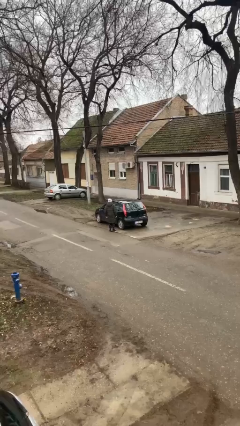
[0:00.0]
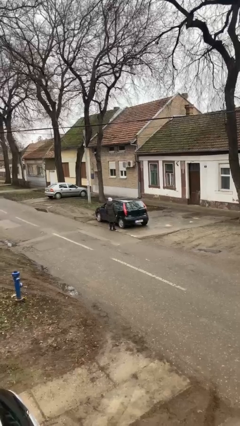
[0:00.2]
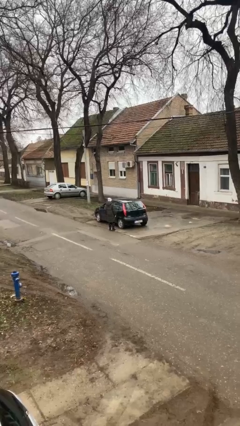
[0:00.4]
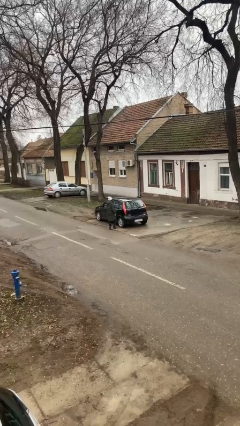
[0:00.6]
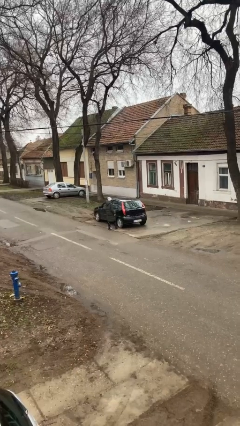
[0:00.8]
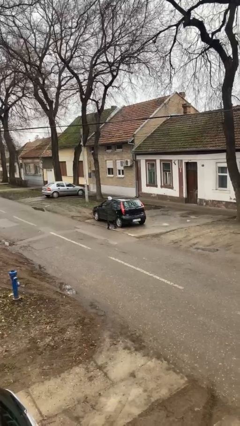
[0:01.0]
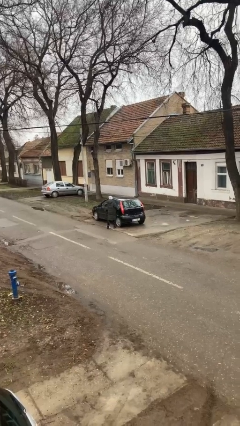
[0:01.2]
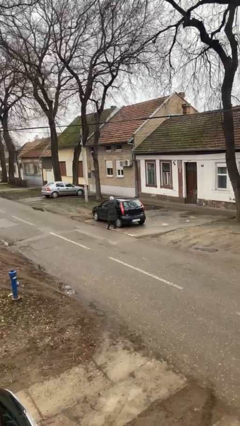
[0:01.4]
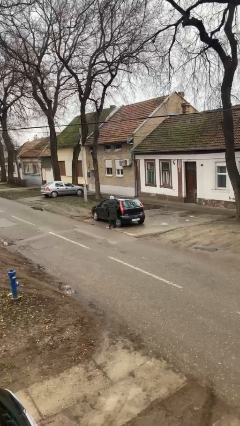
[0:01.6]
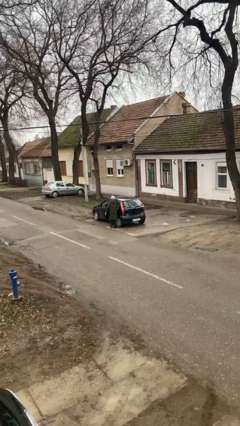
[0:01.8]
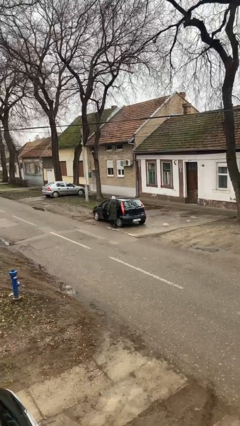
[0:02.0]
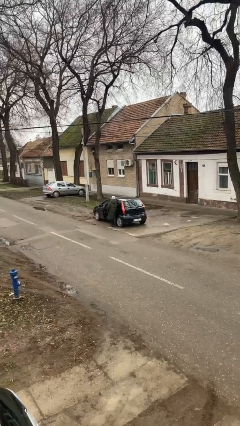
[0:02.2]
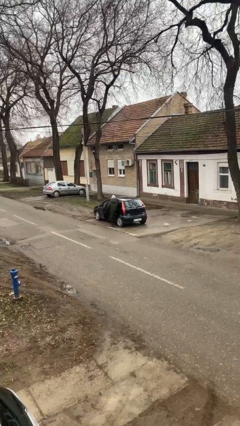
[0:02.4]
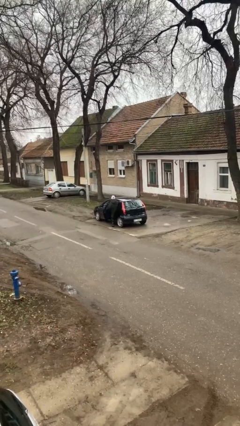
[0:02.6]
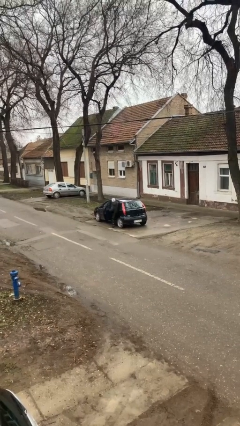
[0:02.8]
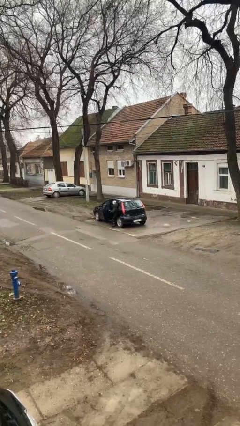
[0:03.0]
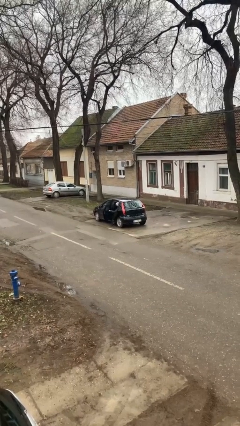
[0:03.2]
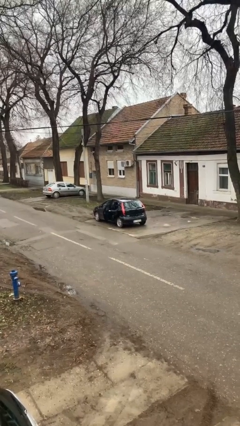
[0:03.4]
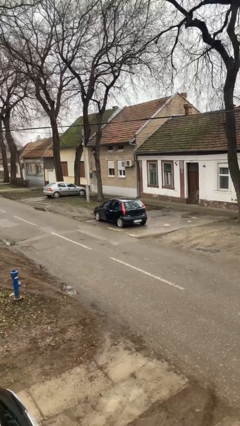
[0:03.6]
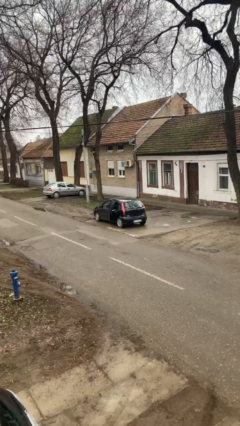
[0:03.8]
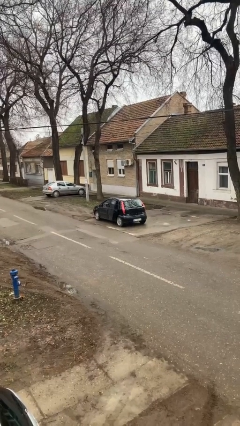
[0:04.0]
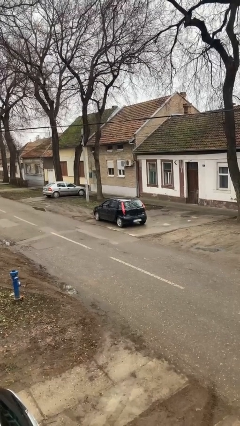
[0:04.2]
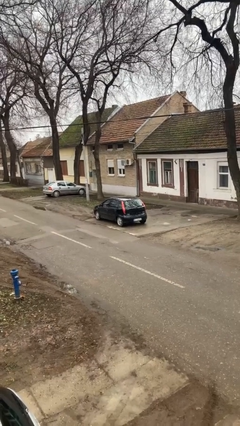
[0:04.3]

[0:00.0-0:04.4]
car picks up person

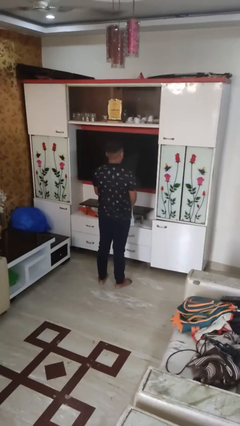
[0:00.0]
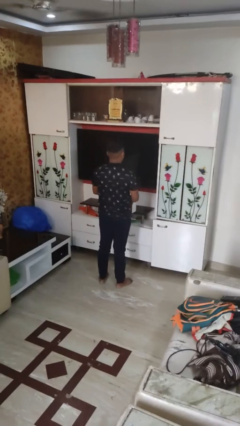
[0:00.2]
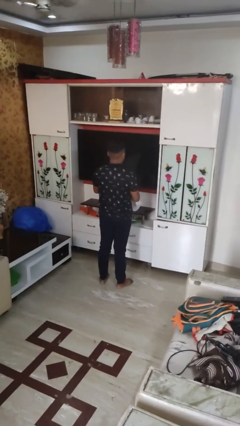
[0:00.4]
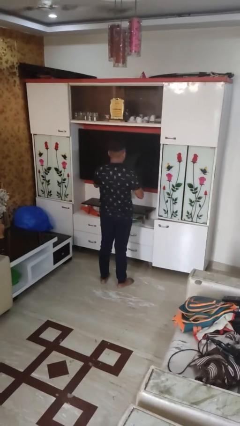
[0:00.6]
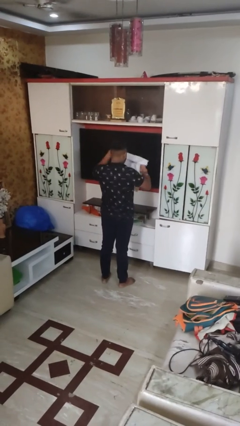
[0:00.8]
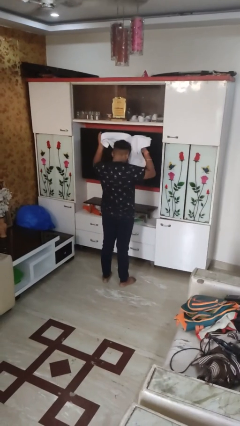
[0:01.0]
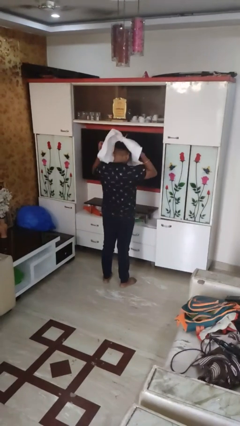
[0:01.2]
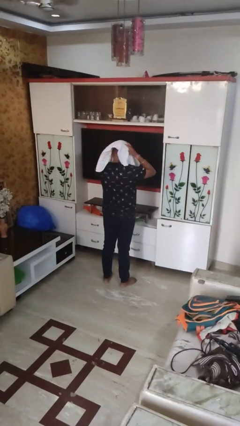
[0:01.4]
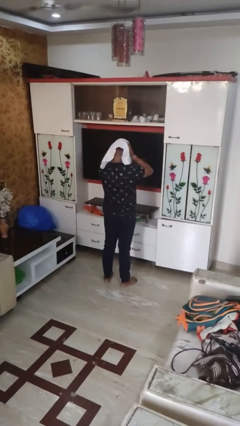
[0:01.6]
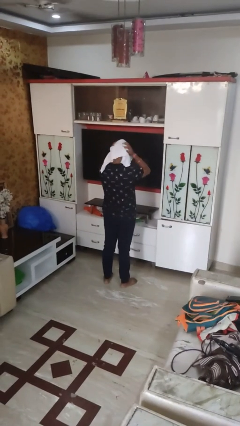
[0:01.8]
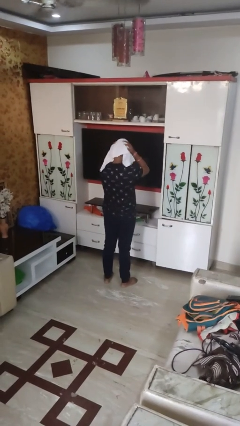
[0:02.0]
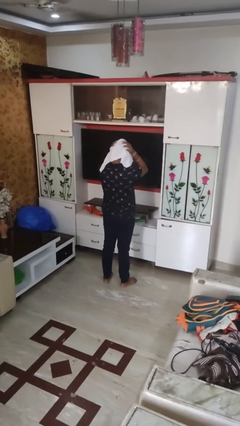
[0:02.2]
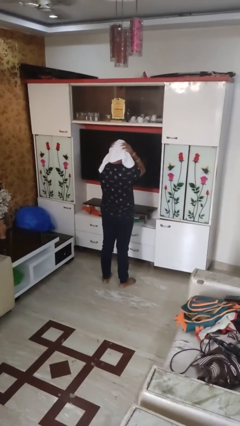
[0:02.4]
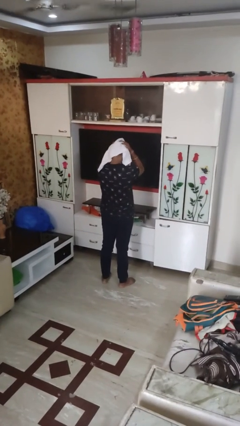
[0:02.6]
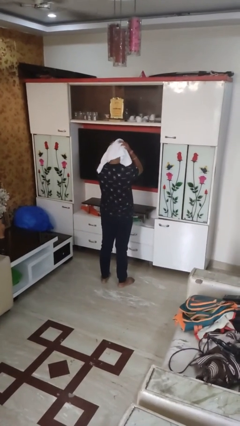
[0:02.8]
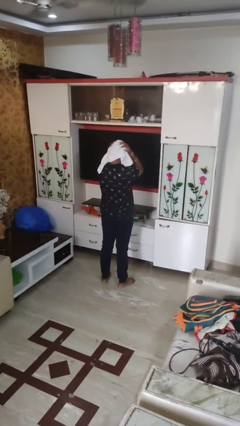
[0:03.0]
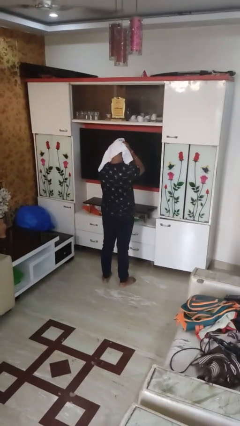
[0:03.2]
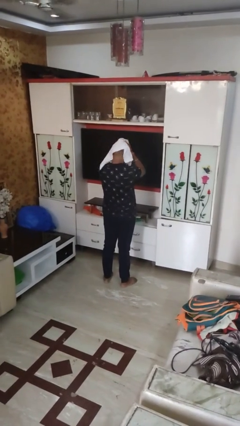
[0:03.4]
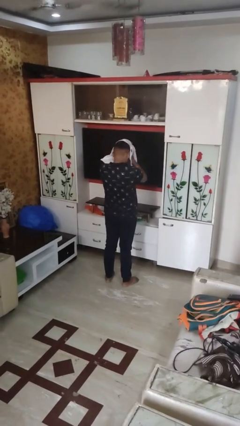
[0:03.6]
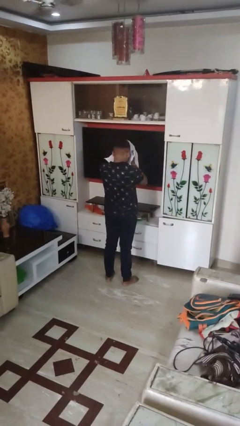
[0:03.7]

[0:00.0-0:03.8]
person dries hair with towel

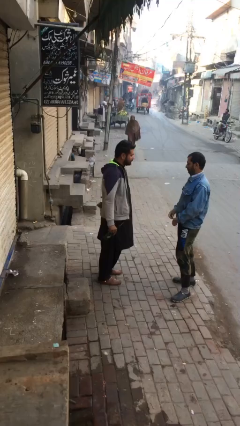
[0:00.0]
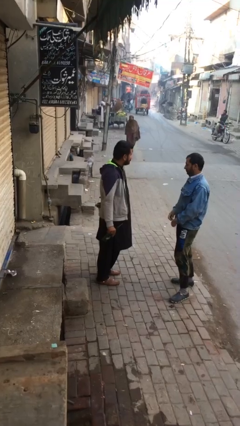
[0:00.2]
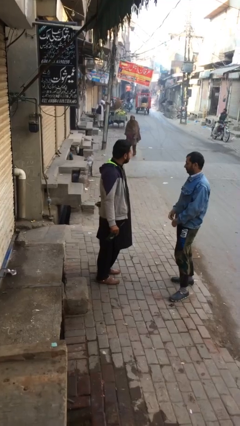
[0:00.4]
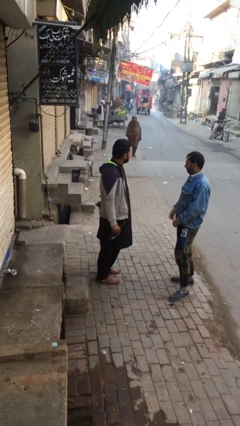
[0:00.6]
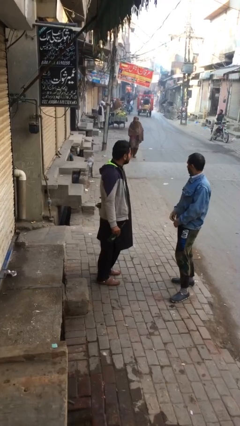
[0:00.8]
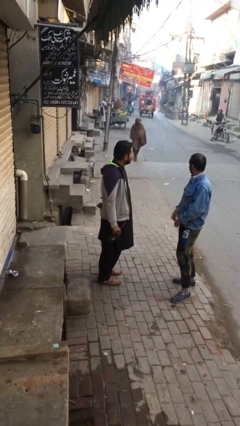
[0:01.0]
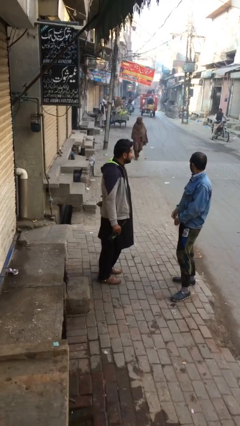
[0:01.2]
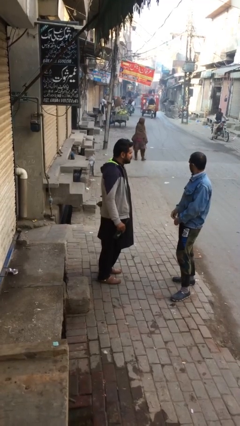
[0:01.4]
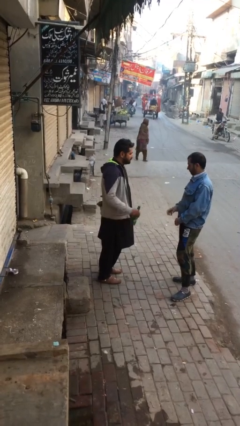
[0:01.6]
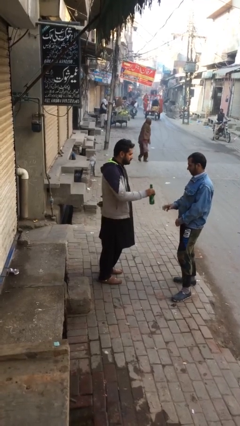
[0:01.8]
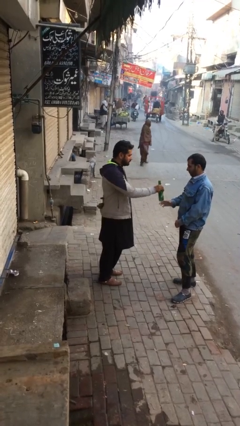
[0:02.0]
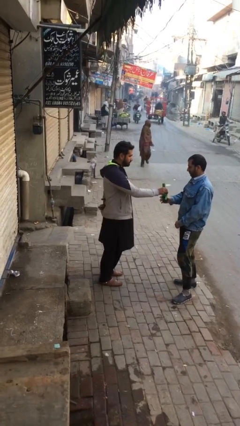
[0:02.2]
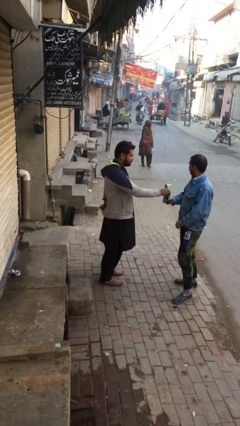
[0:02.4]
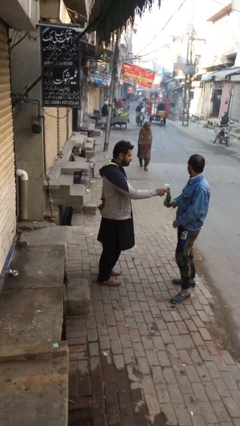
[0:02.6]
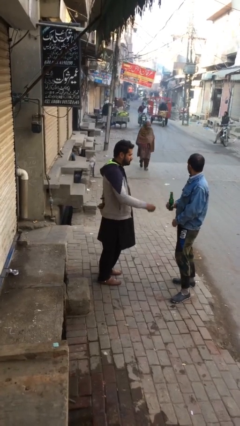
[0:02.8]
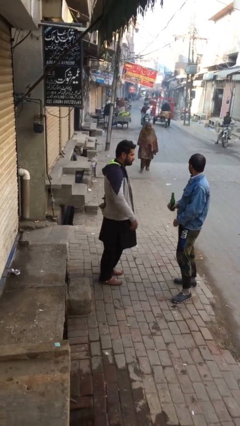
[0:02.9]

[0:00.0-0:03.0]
person transfers object to person

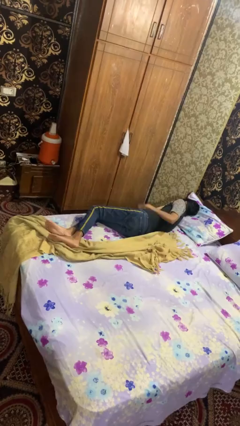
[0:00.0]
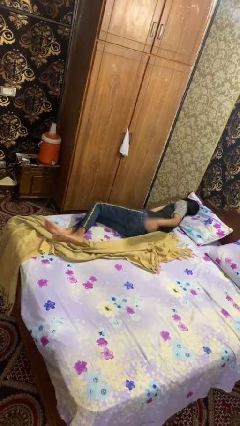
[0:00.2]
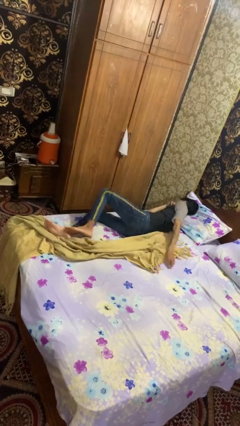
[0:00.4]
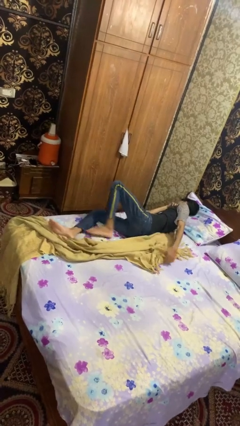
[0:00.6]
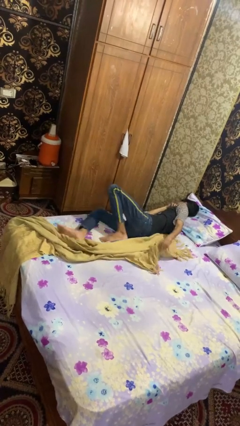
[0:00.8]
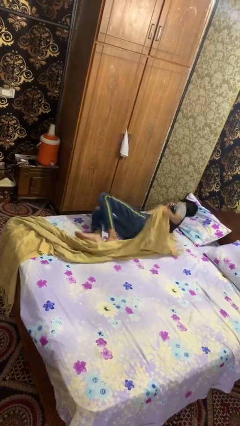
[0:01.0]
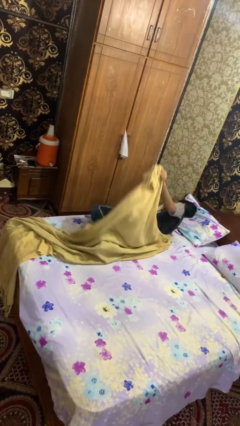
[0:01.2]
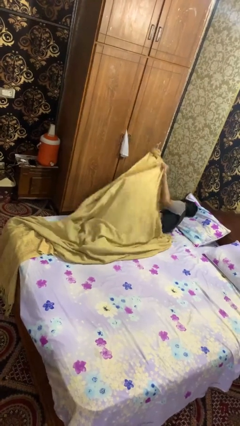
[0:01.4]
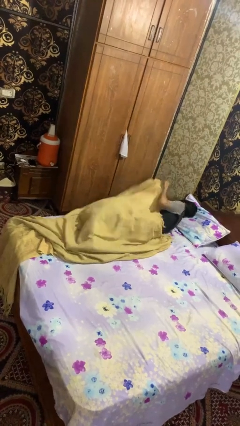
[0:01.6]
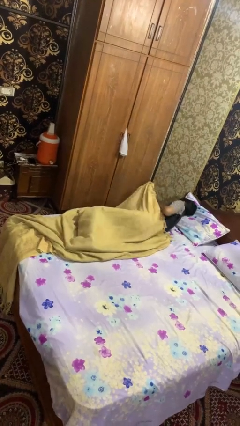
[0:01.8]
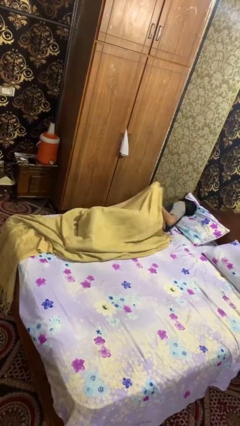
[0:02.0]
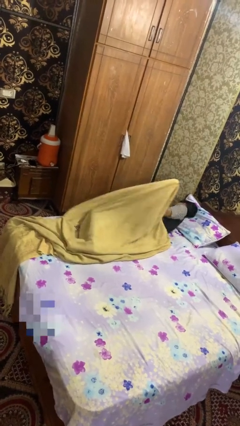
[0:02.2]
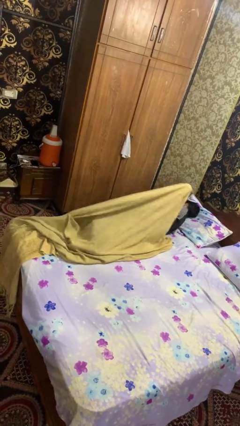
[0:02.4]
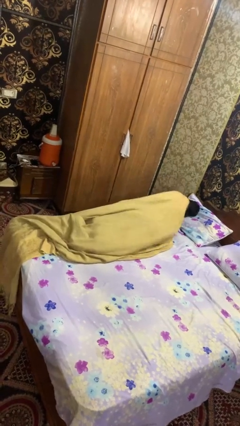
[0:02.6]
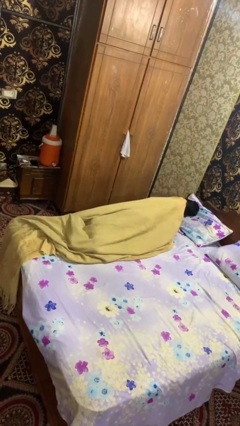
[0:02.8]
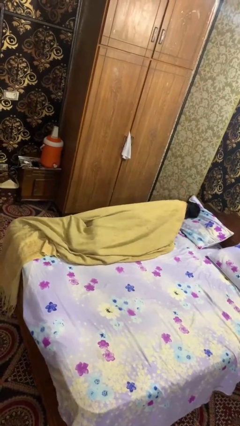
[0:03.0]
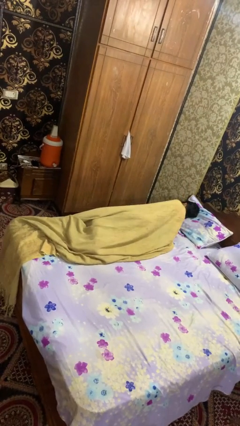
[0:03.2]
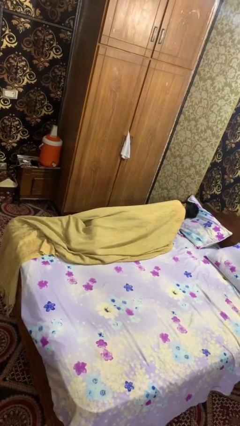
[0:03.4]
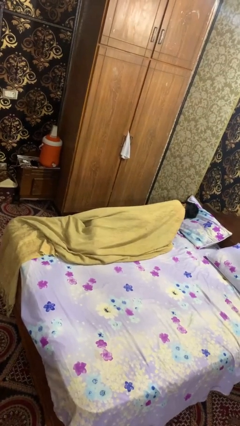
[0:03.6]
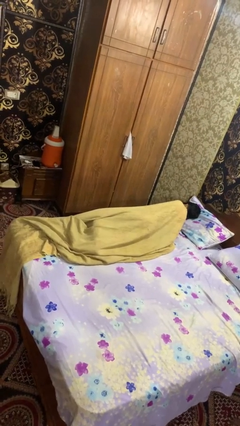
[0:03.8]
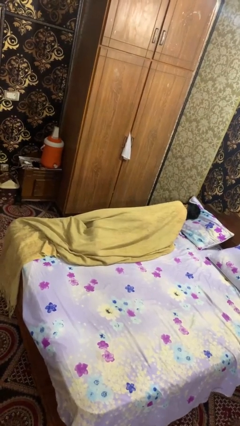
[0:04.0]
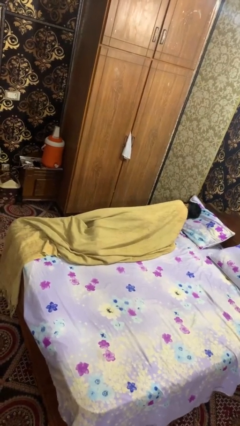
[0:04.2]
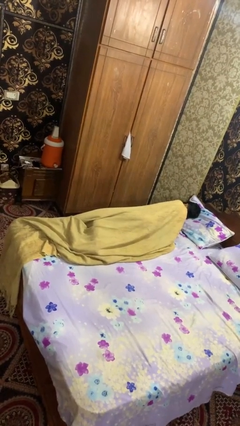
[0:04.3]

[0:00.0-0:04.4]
person covers with bedsheets

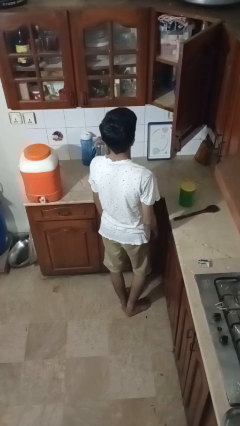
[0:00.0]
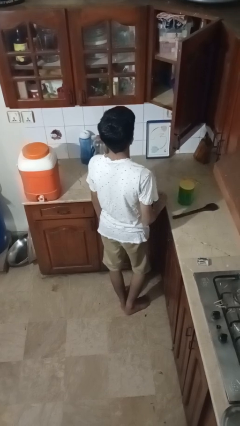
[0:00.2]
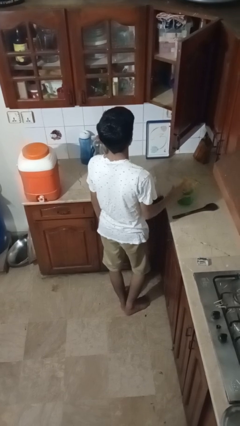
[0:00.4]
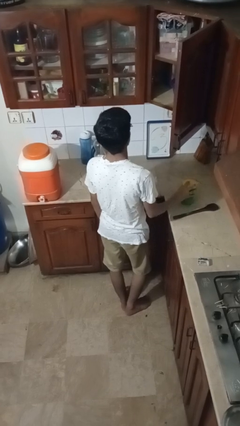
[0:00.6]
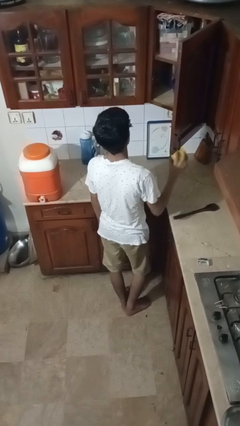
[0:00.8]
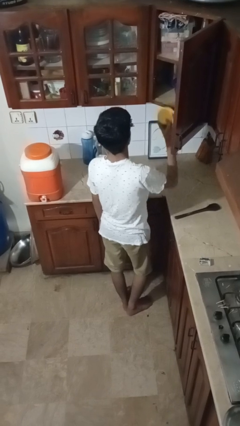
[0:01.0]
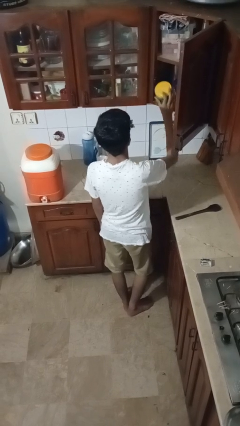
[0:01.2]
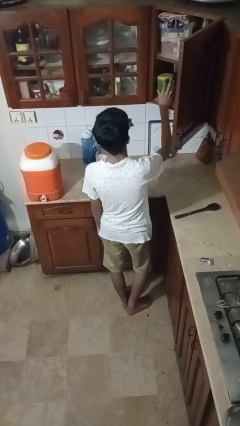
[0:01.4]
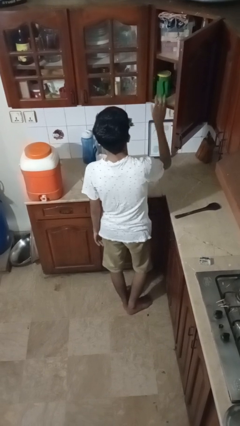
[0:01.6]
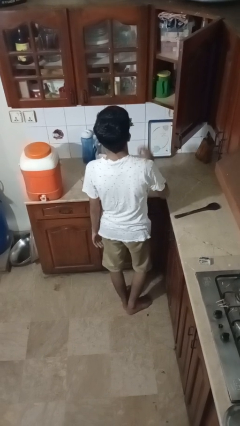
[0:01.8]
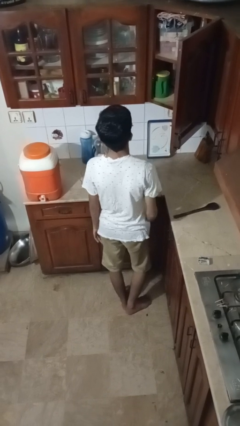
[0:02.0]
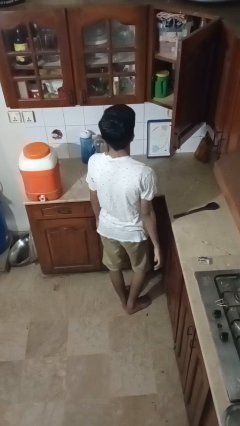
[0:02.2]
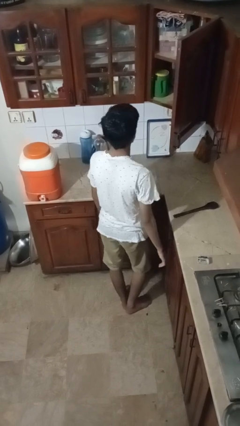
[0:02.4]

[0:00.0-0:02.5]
person puts object in cabinet
